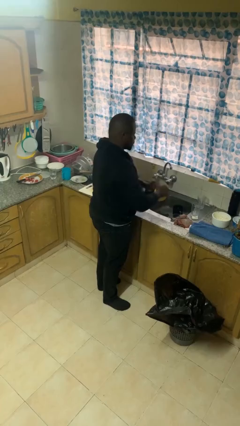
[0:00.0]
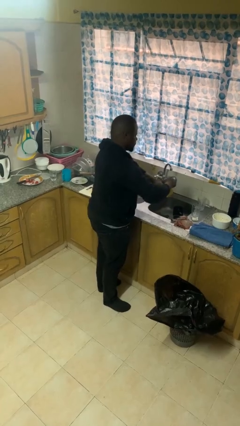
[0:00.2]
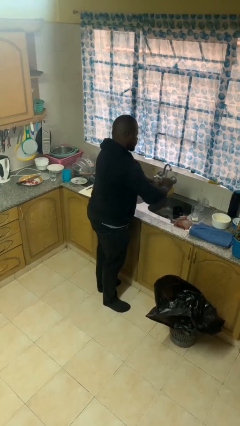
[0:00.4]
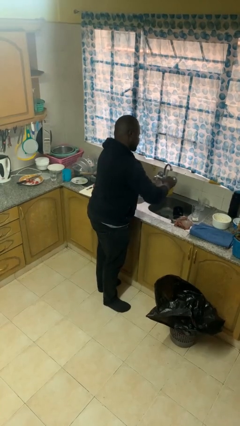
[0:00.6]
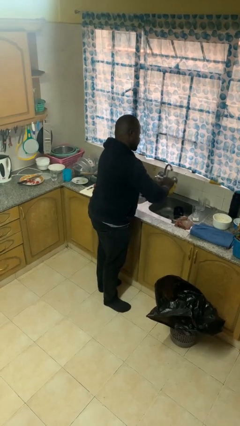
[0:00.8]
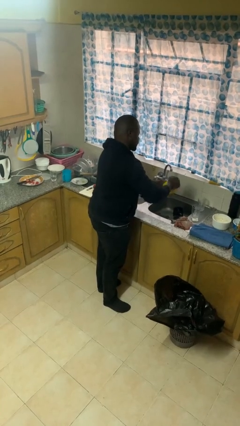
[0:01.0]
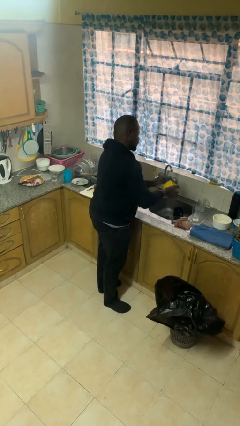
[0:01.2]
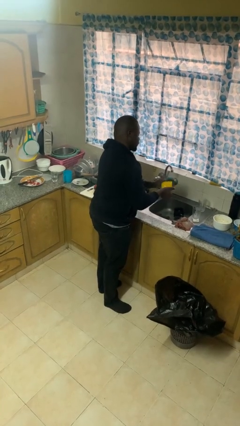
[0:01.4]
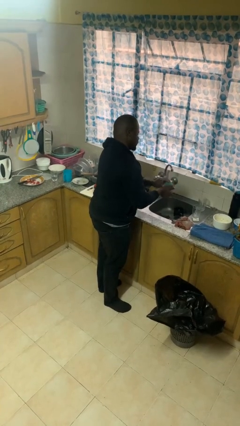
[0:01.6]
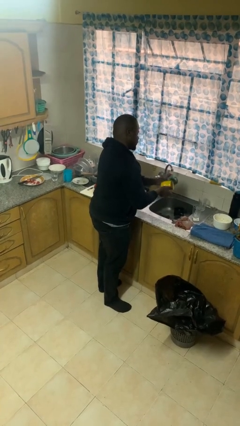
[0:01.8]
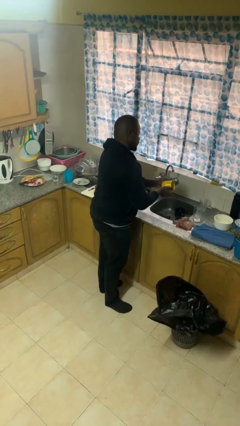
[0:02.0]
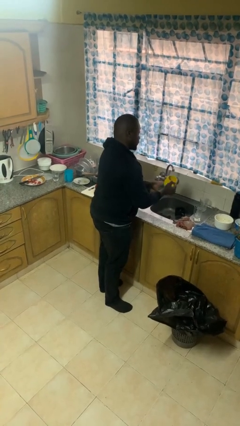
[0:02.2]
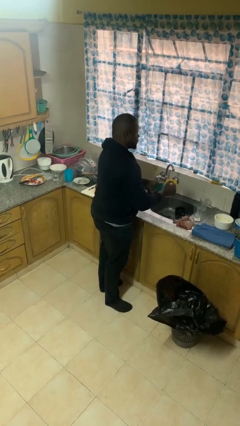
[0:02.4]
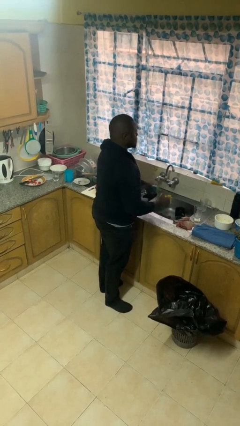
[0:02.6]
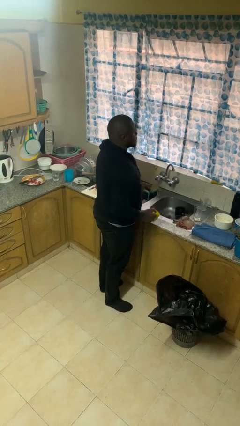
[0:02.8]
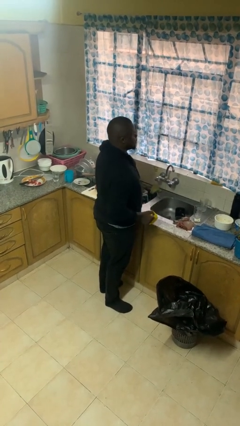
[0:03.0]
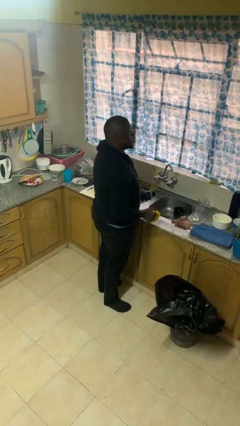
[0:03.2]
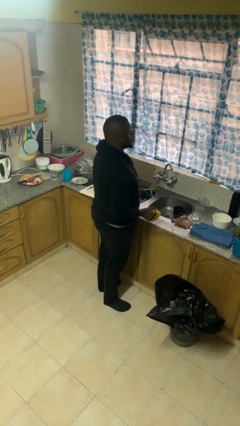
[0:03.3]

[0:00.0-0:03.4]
person washes dish

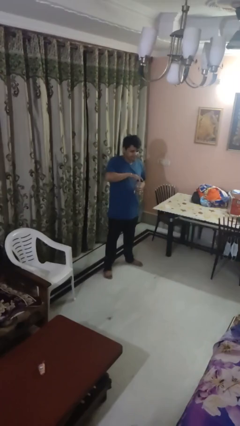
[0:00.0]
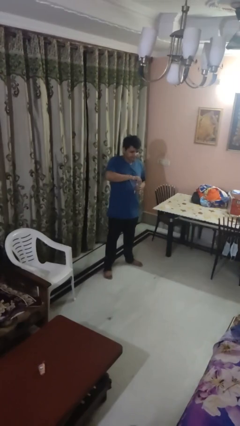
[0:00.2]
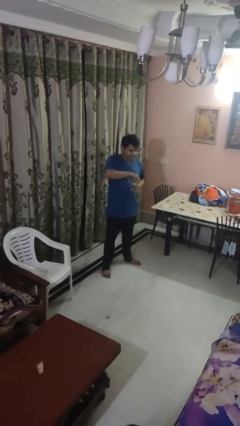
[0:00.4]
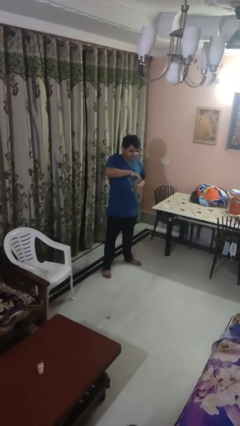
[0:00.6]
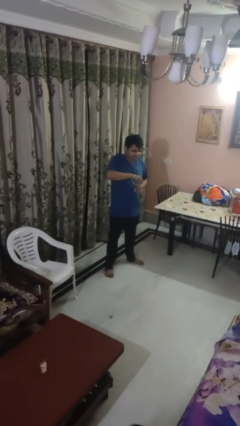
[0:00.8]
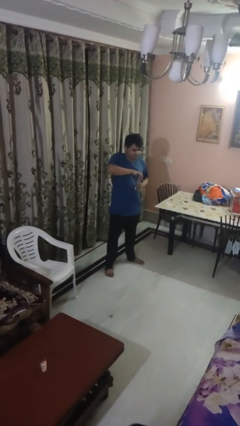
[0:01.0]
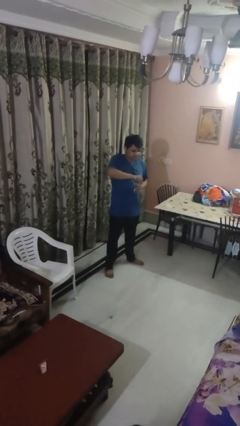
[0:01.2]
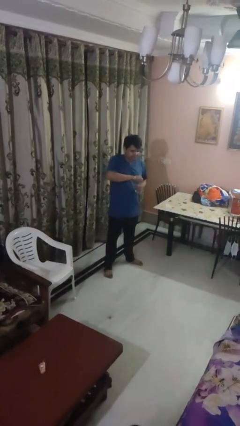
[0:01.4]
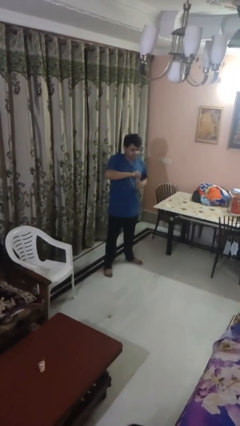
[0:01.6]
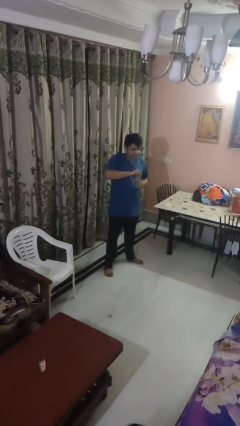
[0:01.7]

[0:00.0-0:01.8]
person screws lid to bottle

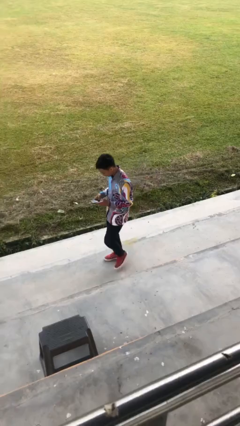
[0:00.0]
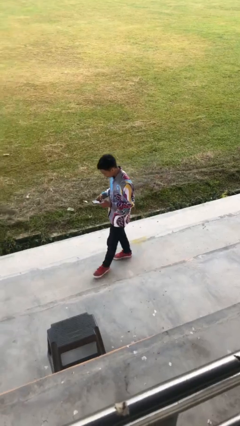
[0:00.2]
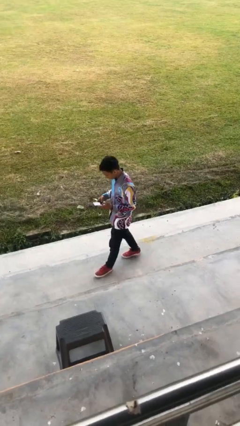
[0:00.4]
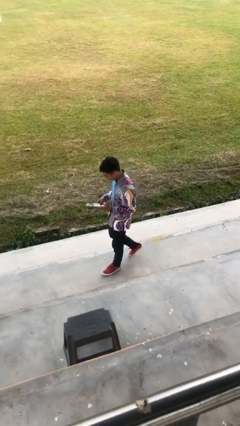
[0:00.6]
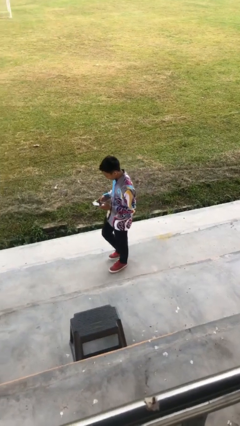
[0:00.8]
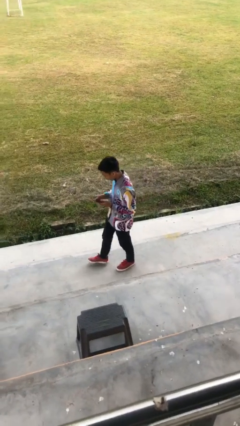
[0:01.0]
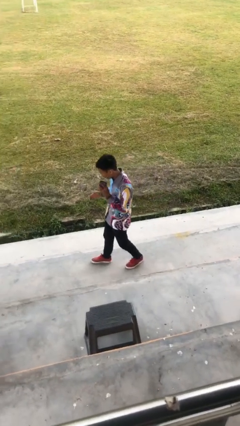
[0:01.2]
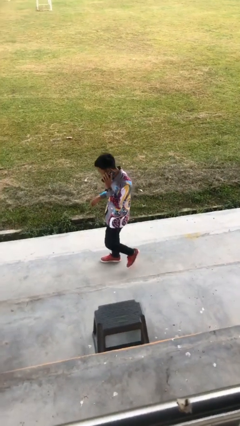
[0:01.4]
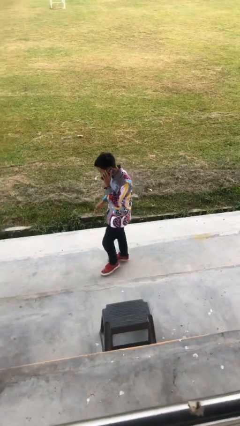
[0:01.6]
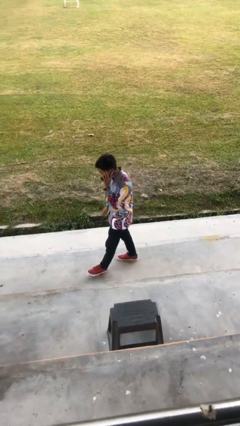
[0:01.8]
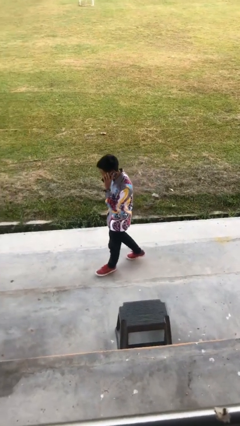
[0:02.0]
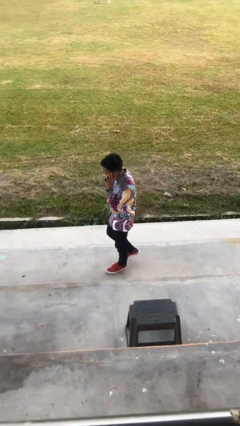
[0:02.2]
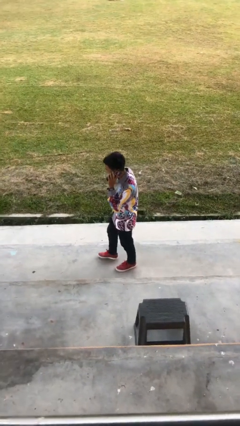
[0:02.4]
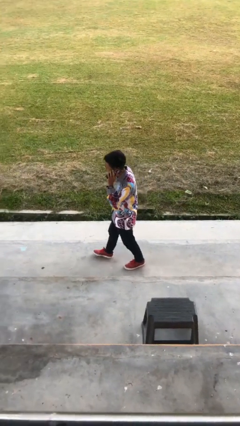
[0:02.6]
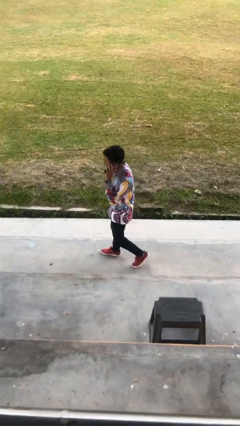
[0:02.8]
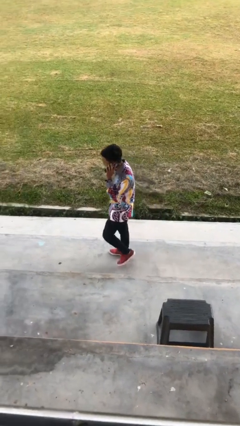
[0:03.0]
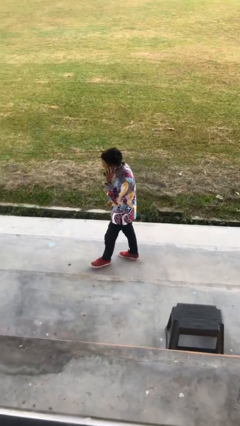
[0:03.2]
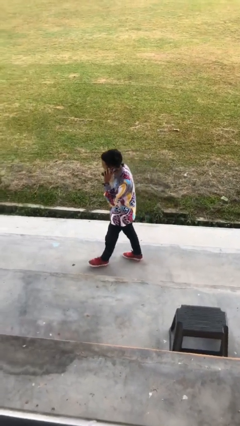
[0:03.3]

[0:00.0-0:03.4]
person talks on phone

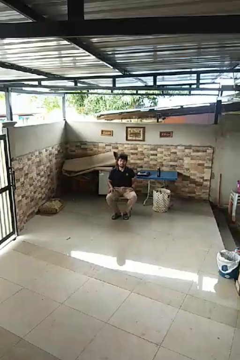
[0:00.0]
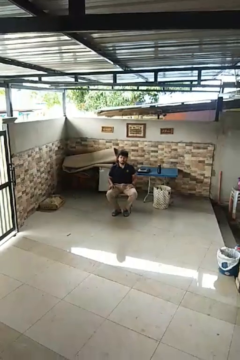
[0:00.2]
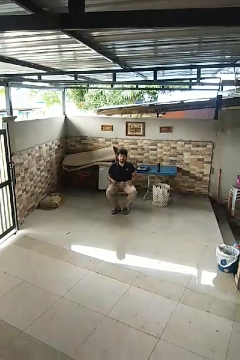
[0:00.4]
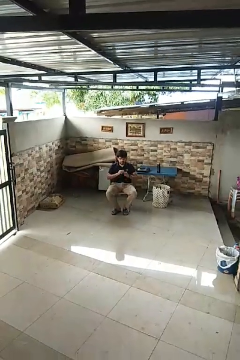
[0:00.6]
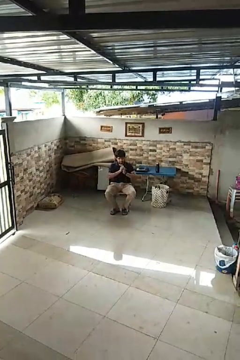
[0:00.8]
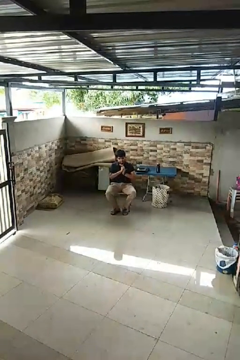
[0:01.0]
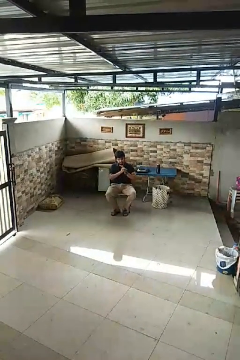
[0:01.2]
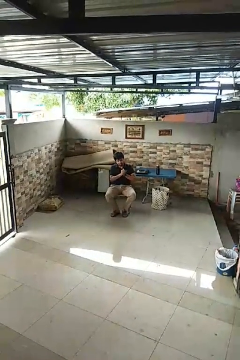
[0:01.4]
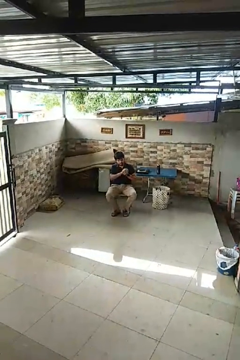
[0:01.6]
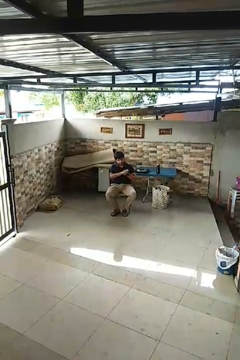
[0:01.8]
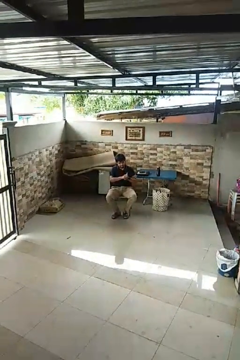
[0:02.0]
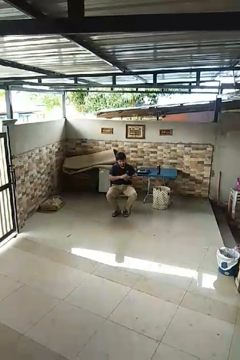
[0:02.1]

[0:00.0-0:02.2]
person cracks knuckles

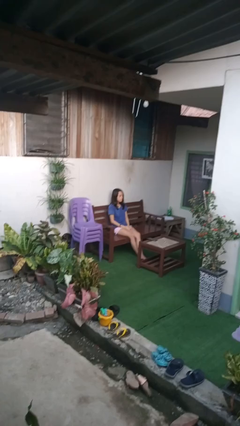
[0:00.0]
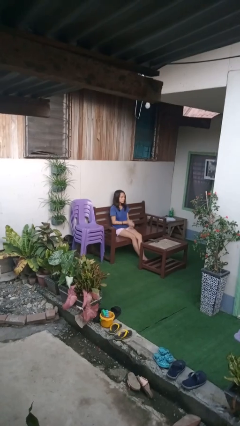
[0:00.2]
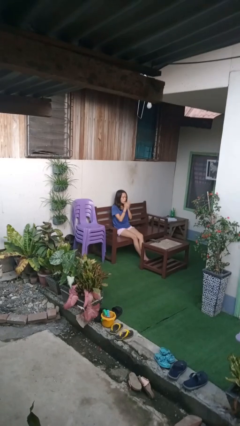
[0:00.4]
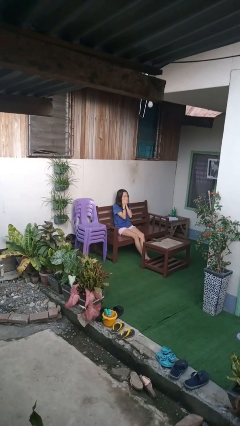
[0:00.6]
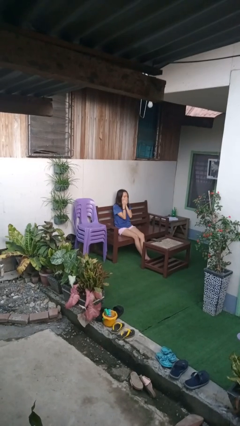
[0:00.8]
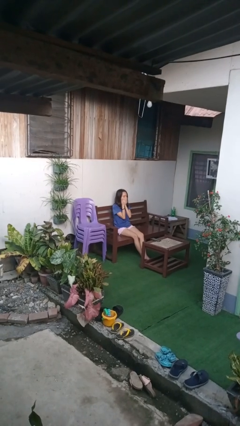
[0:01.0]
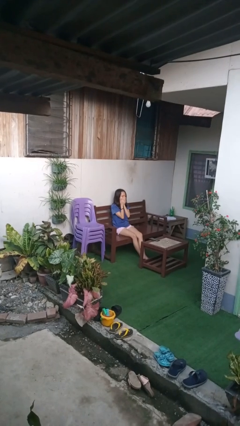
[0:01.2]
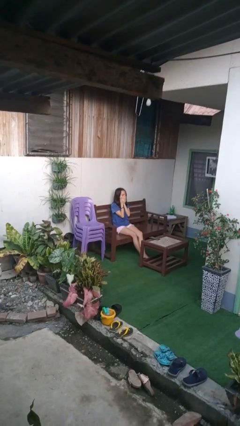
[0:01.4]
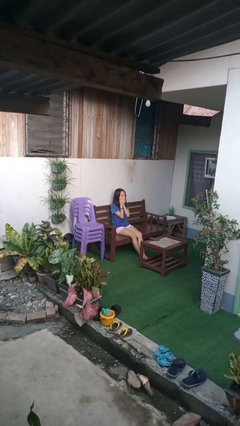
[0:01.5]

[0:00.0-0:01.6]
person yawns

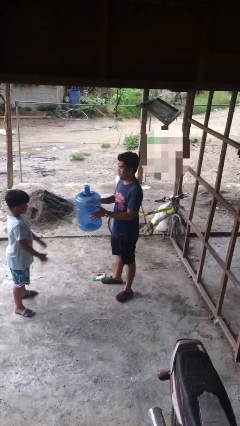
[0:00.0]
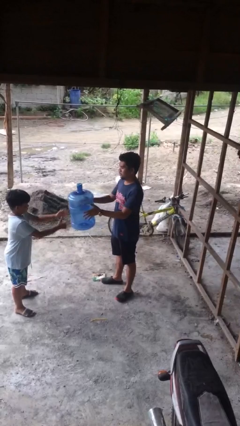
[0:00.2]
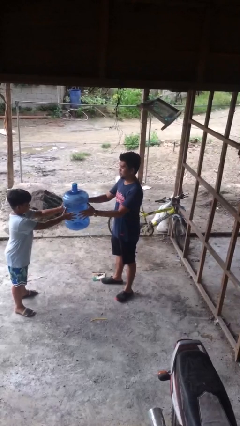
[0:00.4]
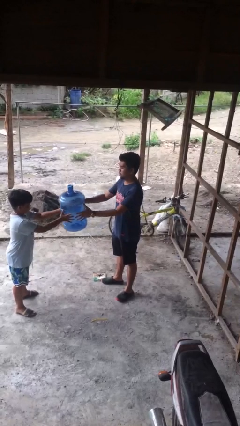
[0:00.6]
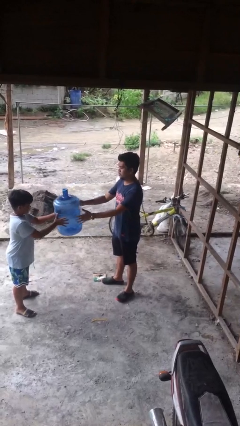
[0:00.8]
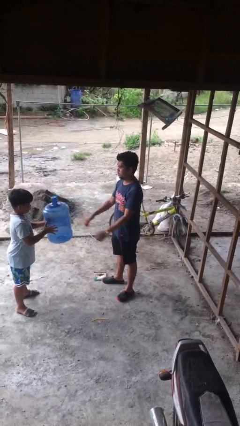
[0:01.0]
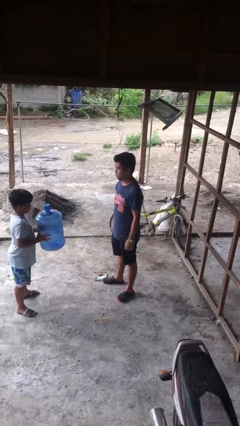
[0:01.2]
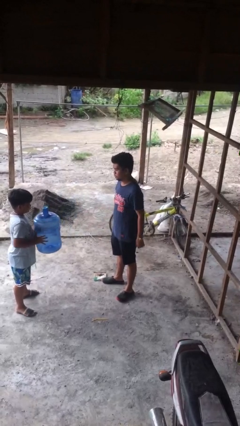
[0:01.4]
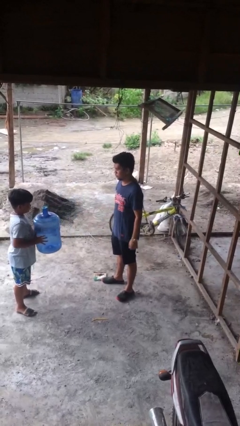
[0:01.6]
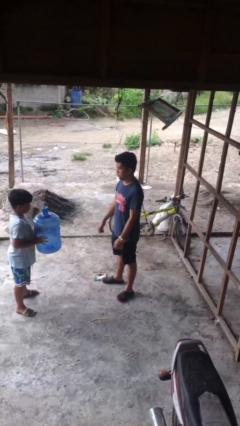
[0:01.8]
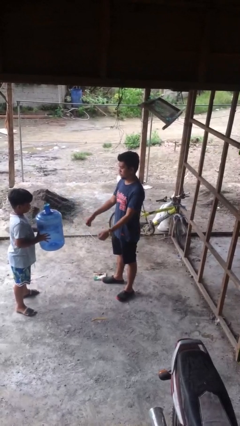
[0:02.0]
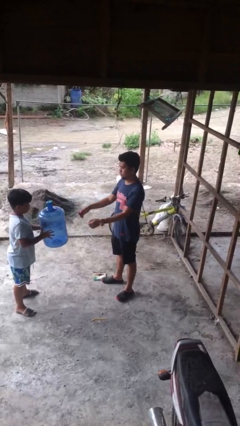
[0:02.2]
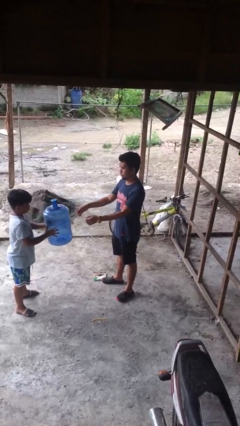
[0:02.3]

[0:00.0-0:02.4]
person transfers object to person

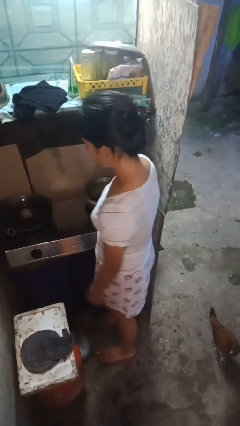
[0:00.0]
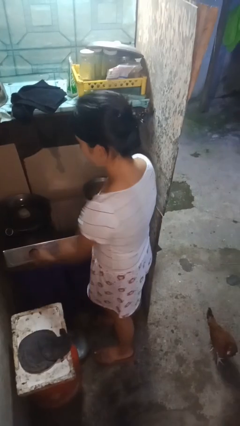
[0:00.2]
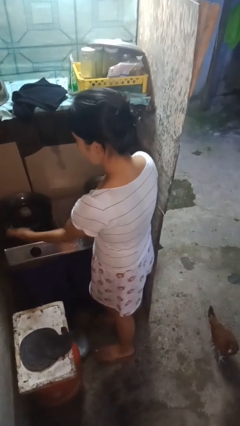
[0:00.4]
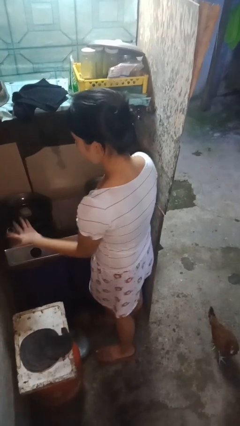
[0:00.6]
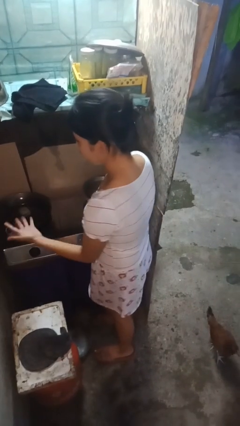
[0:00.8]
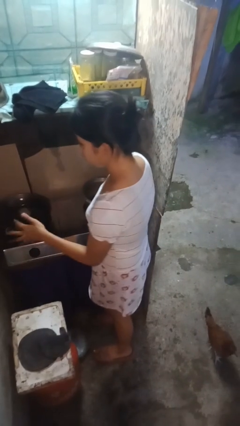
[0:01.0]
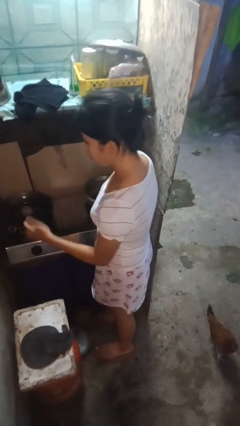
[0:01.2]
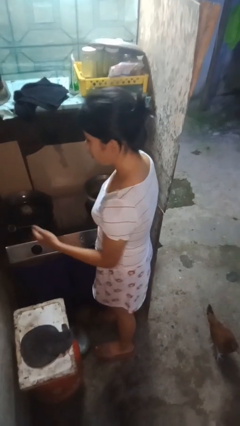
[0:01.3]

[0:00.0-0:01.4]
person burns hand

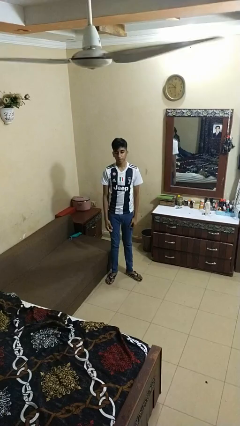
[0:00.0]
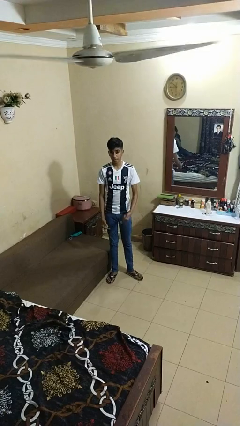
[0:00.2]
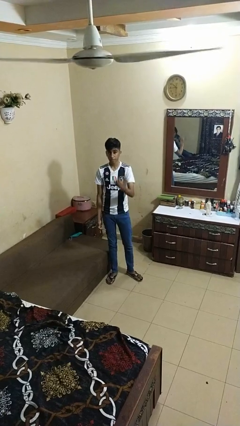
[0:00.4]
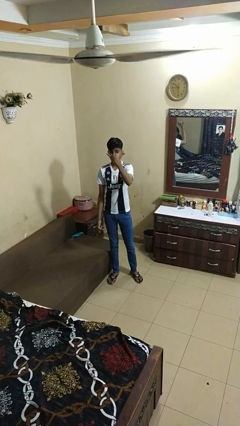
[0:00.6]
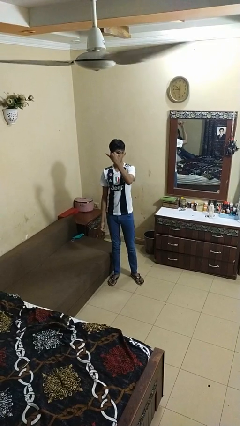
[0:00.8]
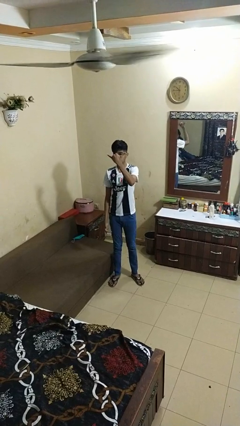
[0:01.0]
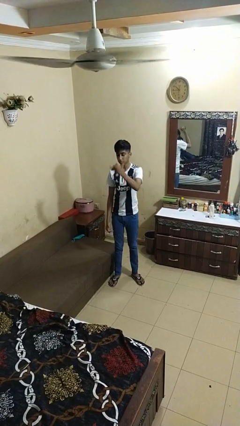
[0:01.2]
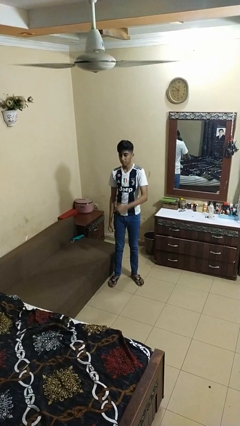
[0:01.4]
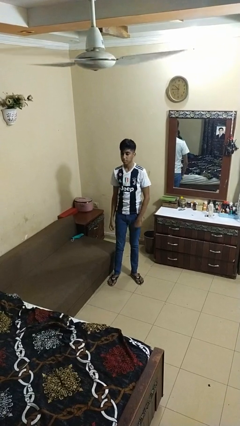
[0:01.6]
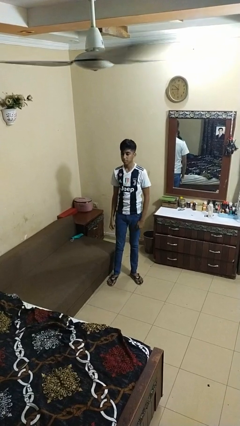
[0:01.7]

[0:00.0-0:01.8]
person gestures hang loose
